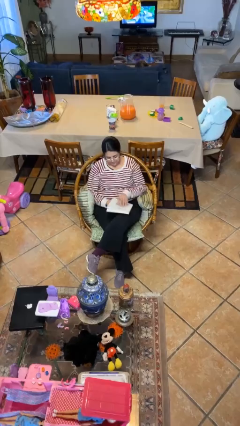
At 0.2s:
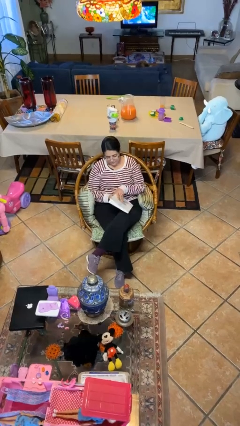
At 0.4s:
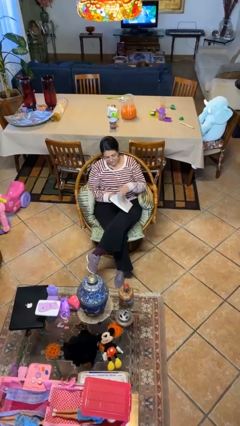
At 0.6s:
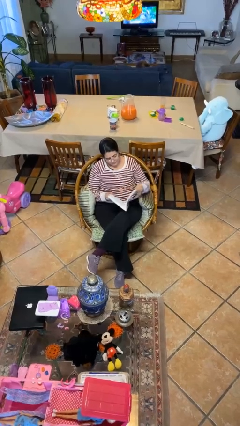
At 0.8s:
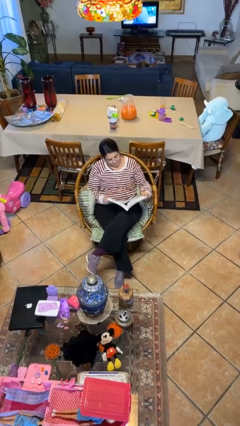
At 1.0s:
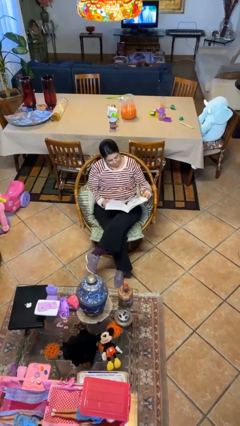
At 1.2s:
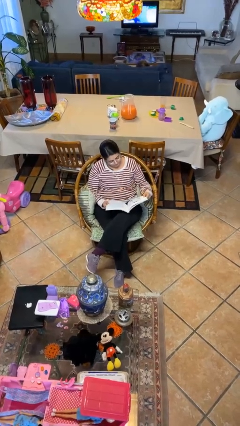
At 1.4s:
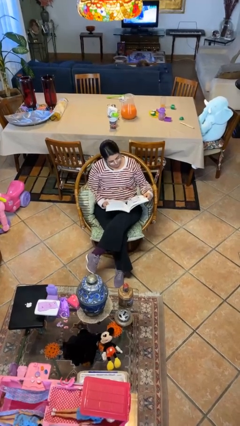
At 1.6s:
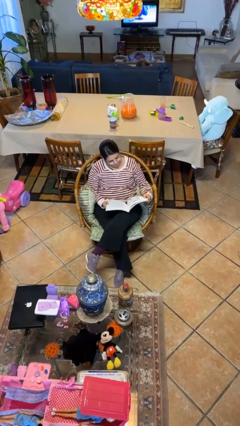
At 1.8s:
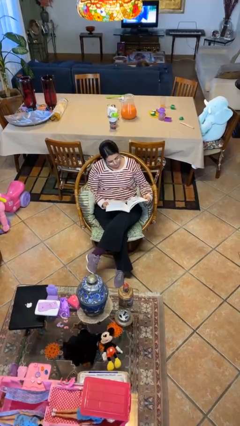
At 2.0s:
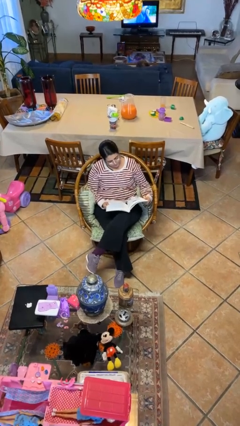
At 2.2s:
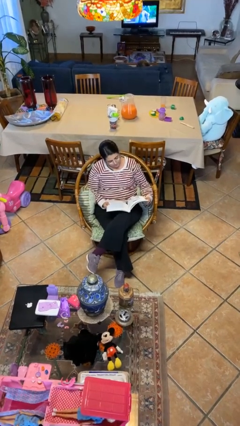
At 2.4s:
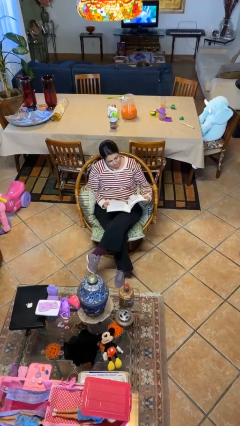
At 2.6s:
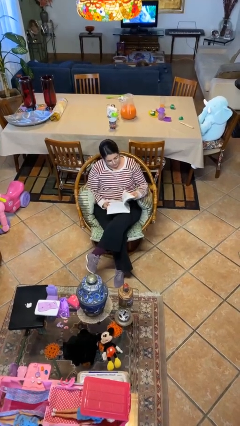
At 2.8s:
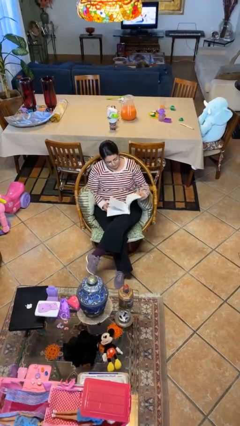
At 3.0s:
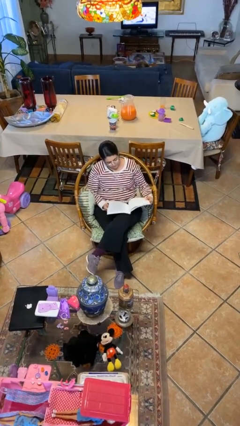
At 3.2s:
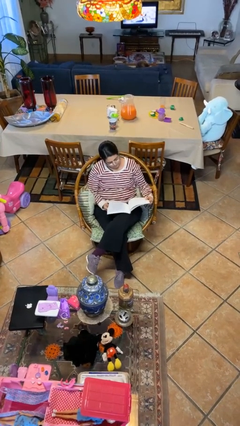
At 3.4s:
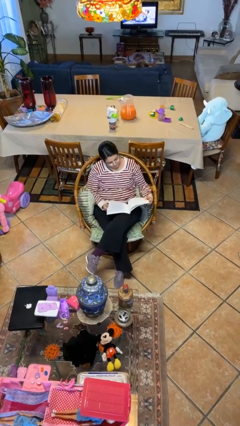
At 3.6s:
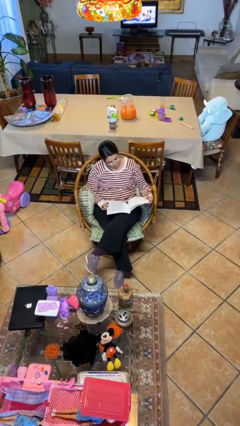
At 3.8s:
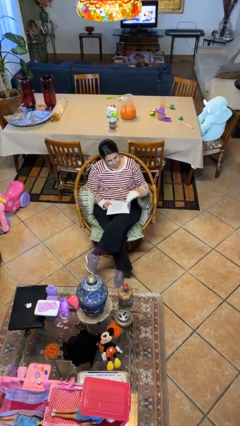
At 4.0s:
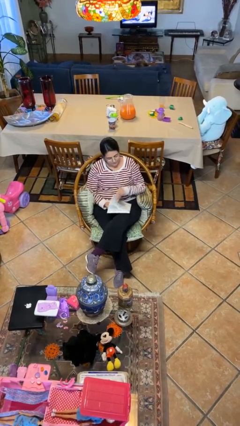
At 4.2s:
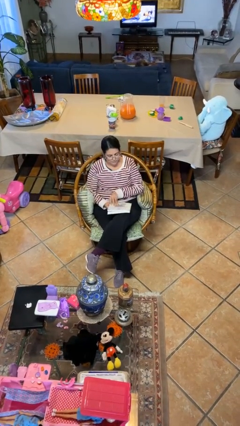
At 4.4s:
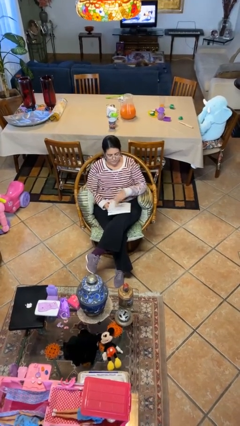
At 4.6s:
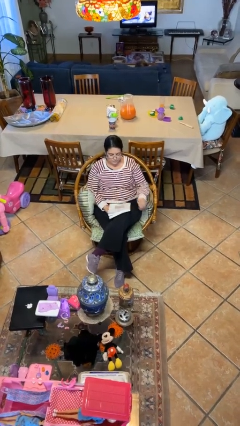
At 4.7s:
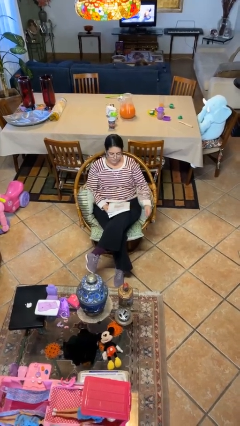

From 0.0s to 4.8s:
person reads document

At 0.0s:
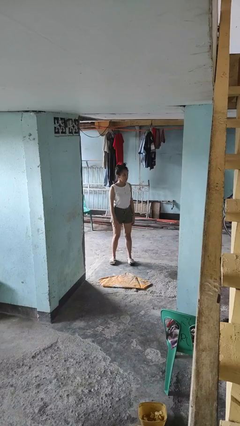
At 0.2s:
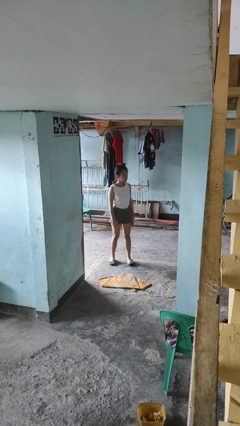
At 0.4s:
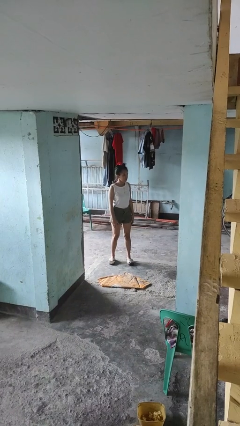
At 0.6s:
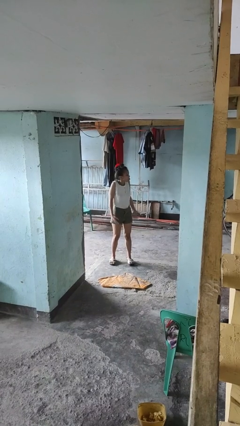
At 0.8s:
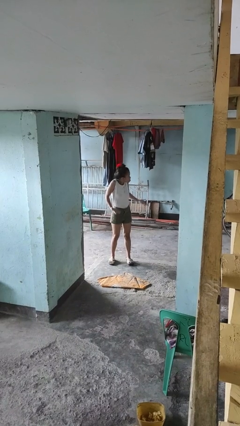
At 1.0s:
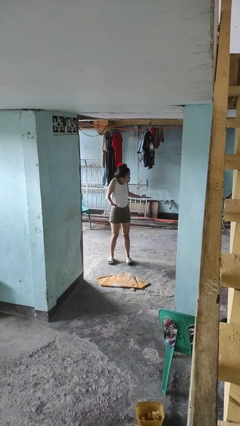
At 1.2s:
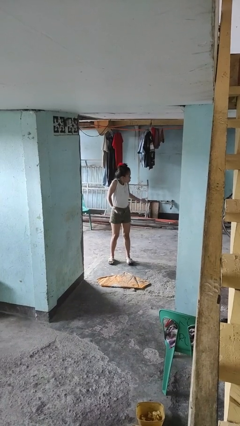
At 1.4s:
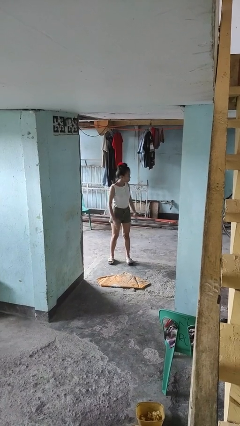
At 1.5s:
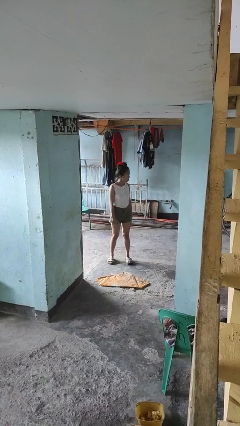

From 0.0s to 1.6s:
person shrugs

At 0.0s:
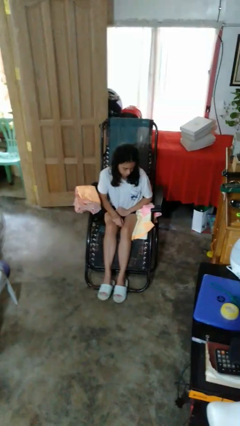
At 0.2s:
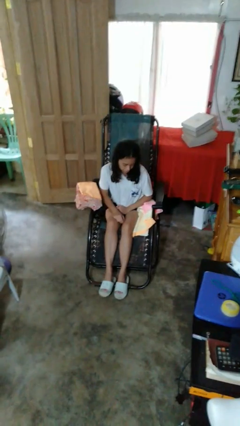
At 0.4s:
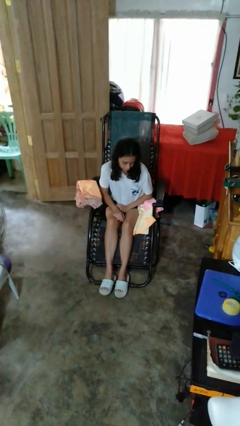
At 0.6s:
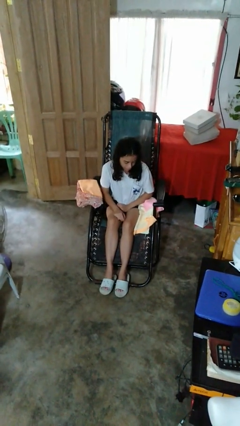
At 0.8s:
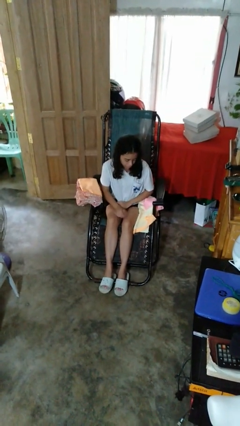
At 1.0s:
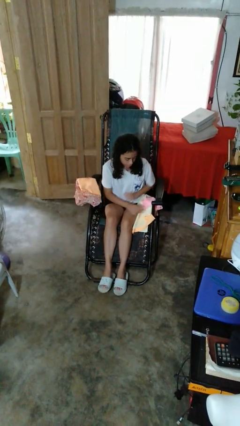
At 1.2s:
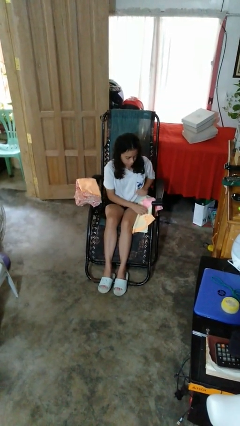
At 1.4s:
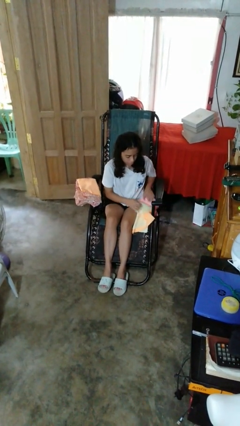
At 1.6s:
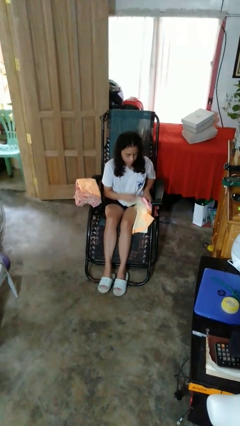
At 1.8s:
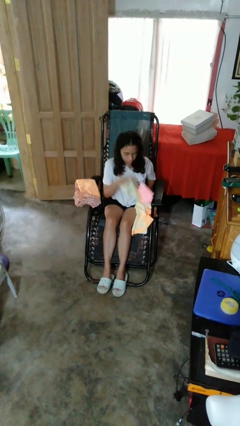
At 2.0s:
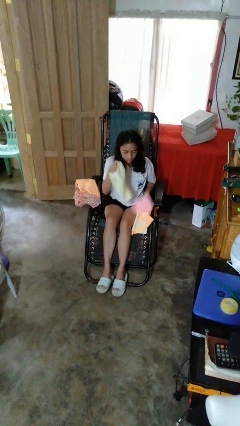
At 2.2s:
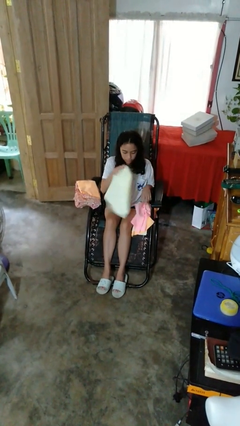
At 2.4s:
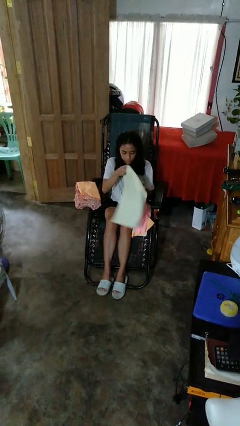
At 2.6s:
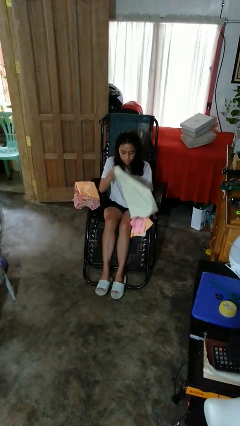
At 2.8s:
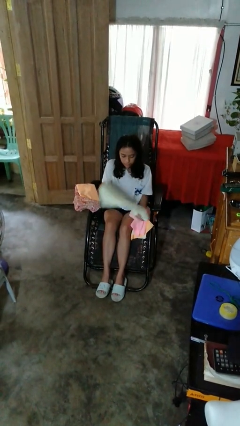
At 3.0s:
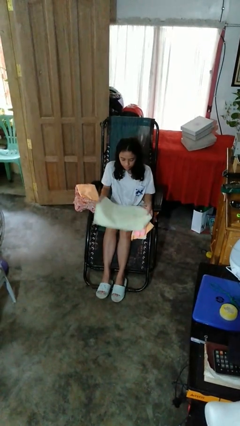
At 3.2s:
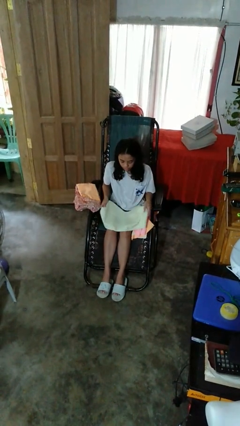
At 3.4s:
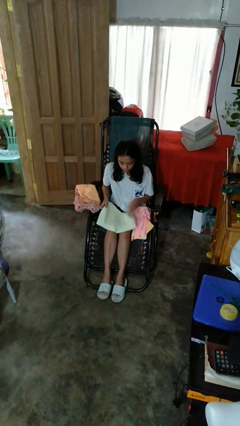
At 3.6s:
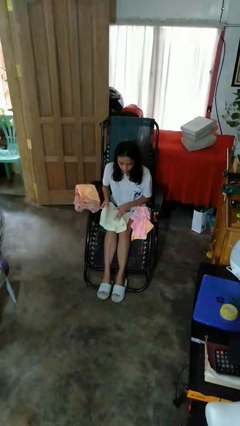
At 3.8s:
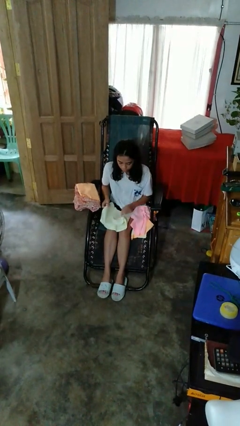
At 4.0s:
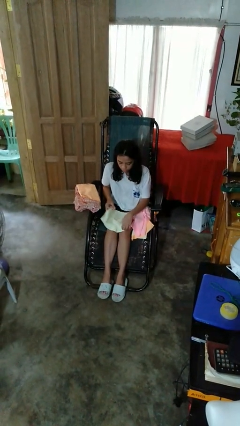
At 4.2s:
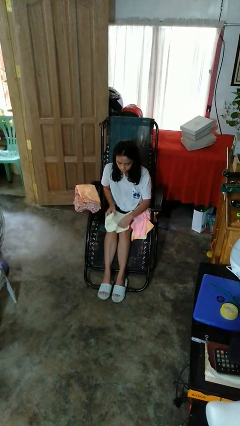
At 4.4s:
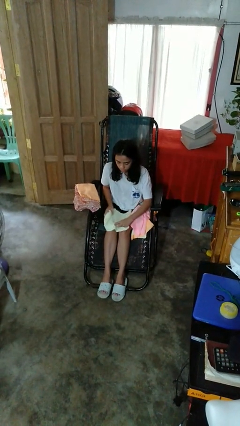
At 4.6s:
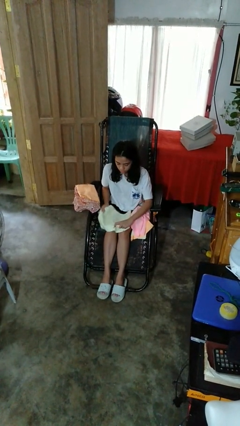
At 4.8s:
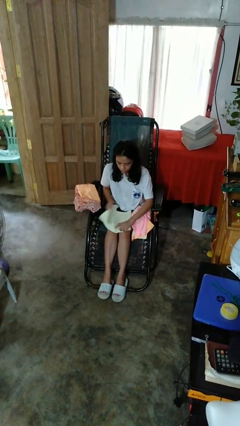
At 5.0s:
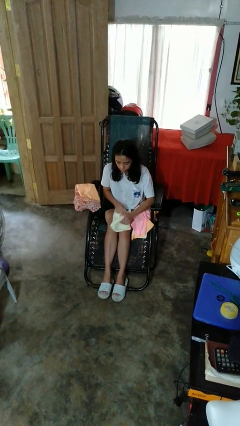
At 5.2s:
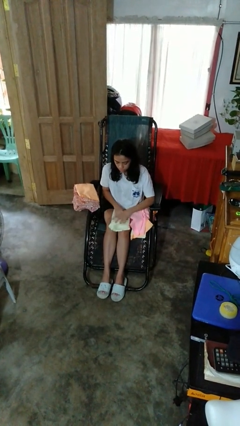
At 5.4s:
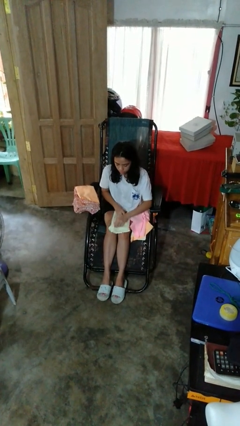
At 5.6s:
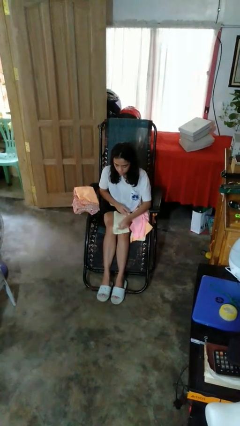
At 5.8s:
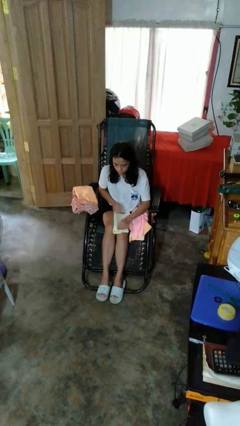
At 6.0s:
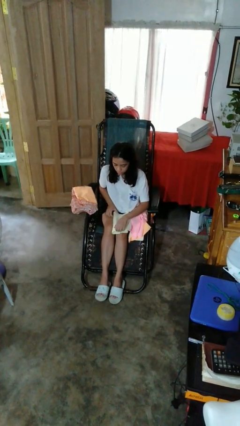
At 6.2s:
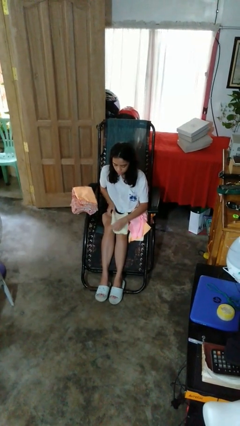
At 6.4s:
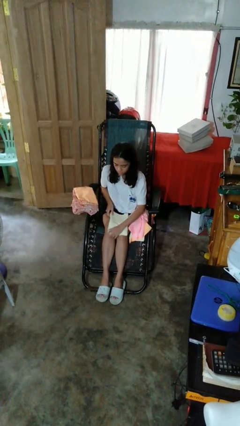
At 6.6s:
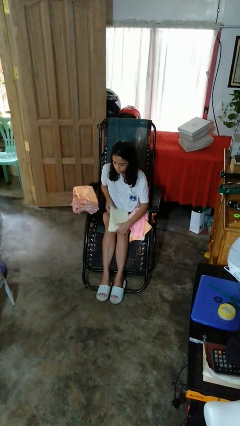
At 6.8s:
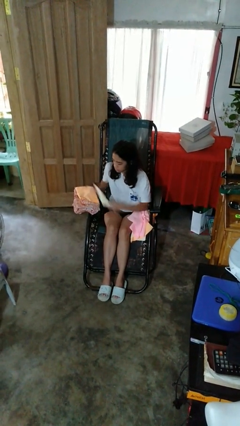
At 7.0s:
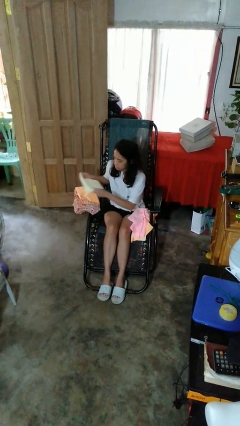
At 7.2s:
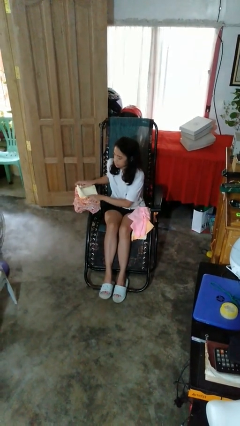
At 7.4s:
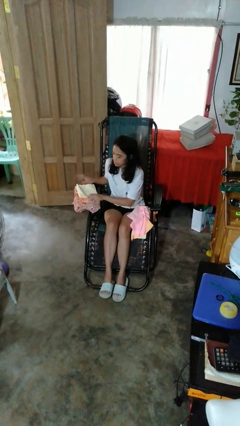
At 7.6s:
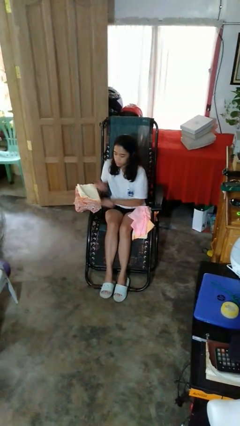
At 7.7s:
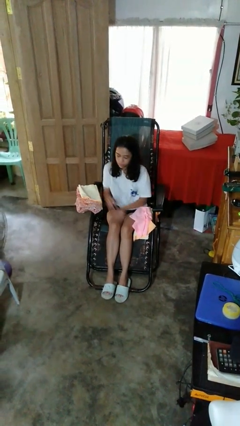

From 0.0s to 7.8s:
person folds towel

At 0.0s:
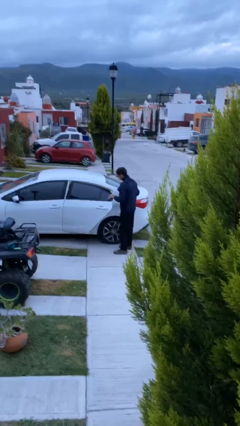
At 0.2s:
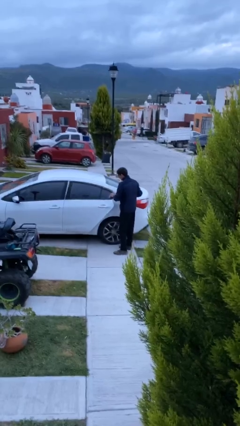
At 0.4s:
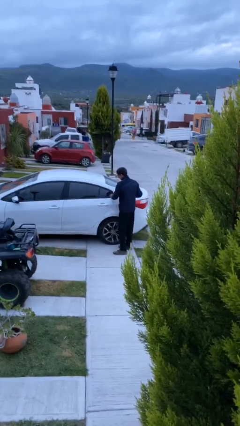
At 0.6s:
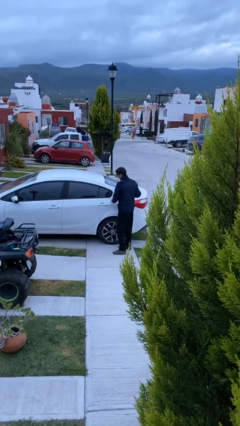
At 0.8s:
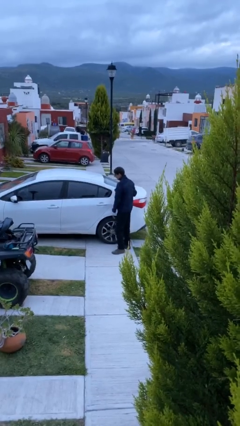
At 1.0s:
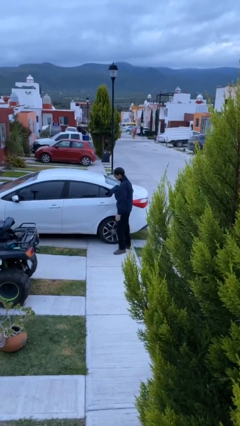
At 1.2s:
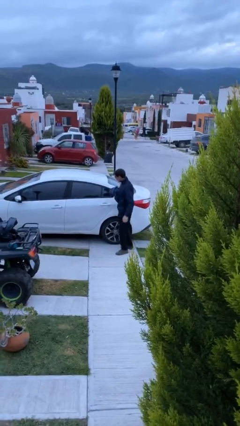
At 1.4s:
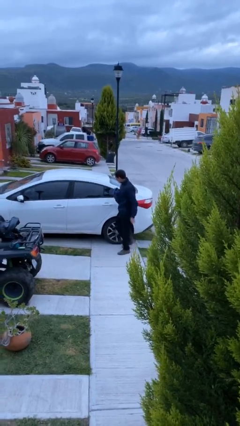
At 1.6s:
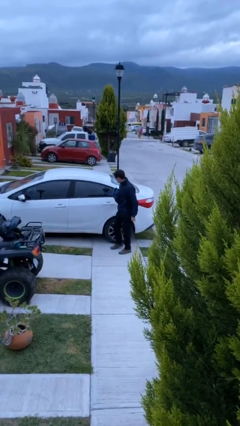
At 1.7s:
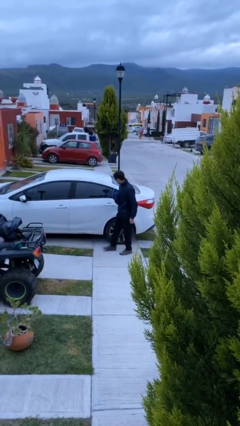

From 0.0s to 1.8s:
person closes car door

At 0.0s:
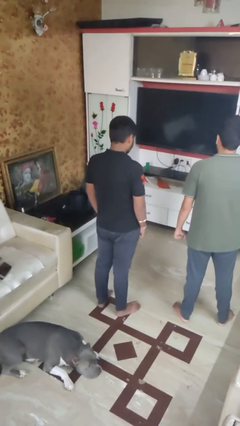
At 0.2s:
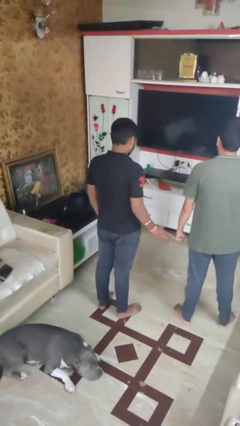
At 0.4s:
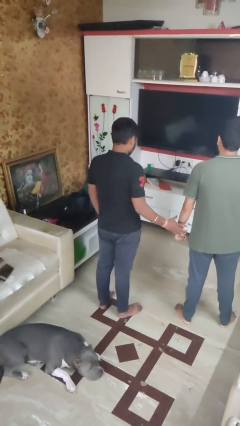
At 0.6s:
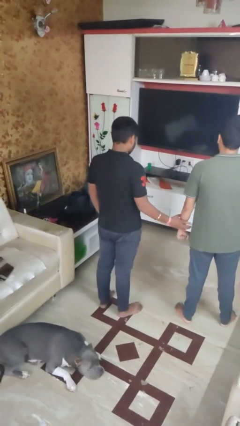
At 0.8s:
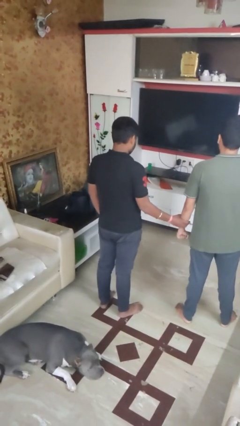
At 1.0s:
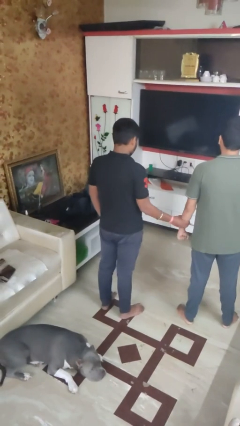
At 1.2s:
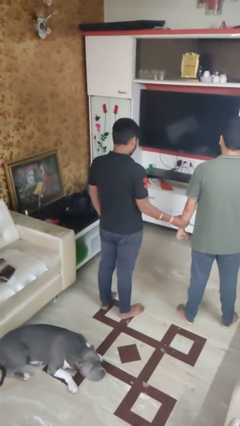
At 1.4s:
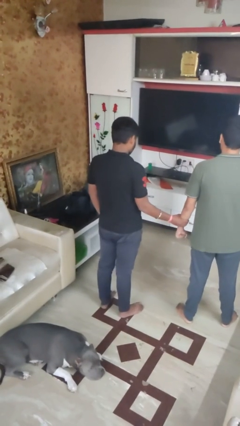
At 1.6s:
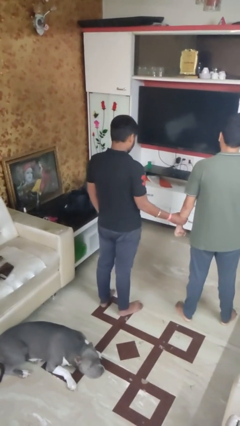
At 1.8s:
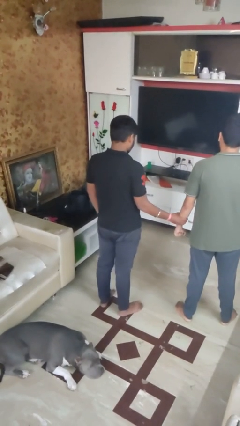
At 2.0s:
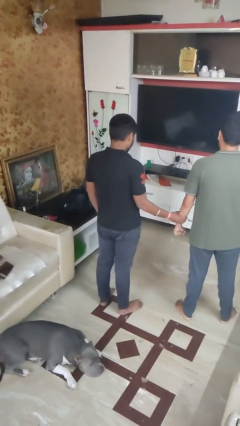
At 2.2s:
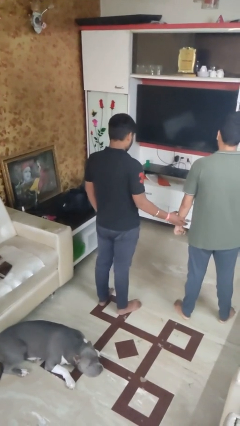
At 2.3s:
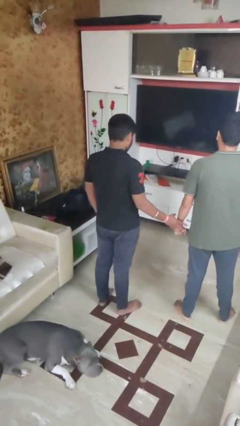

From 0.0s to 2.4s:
person grabs person by forearm
